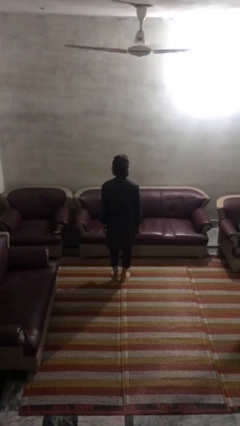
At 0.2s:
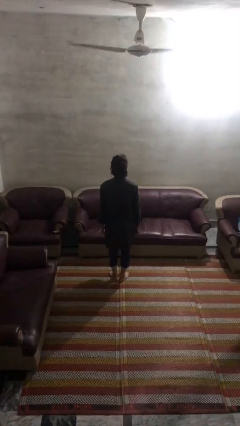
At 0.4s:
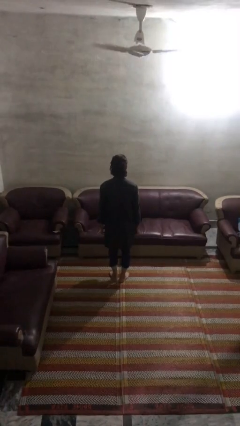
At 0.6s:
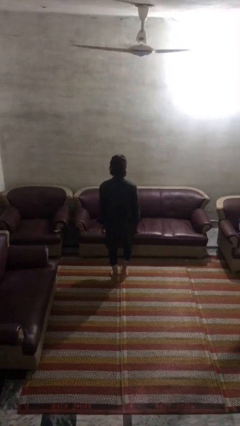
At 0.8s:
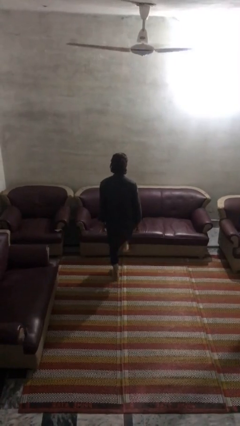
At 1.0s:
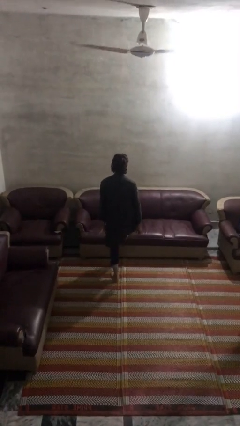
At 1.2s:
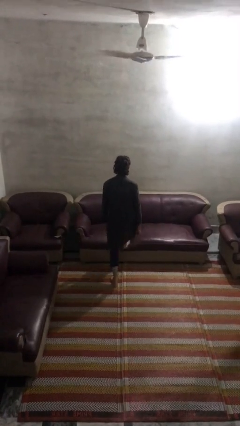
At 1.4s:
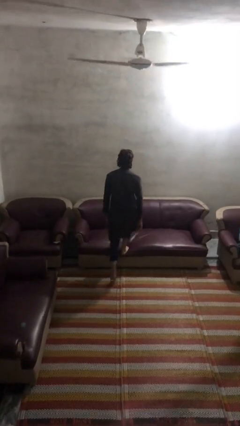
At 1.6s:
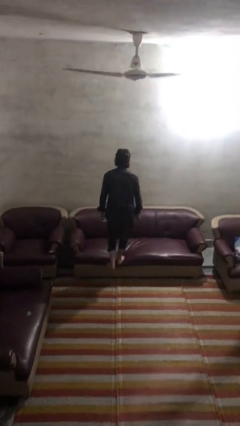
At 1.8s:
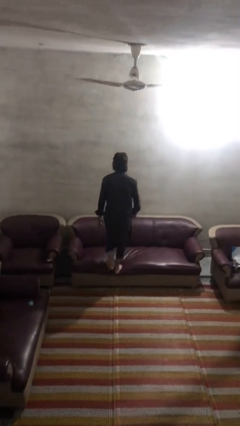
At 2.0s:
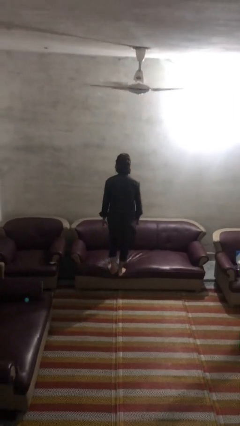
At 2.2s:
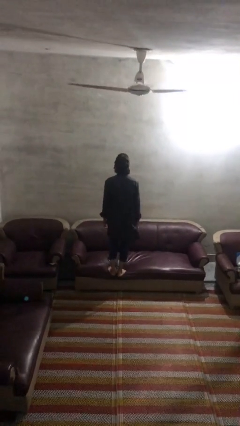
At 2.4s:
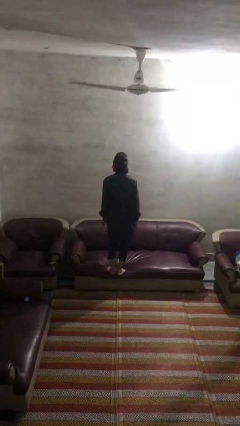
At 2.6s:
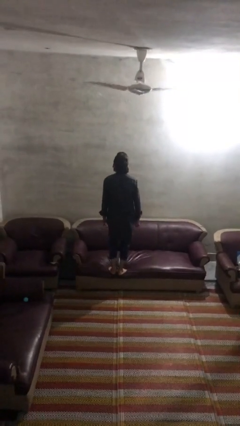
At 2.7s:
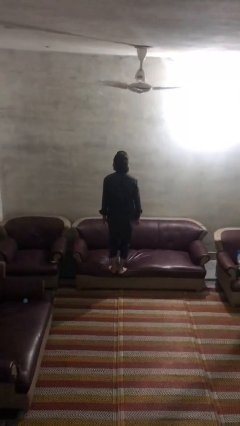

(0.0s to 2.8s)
person climbs on couch

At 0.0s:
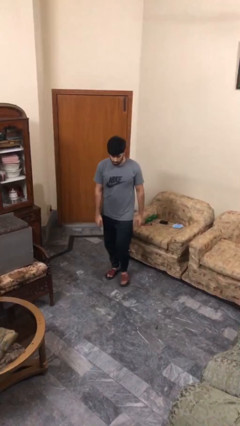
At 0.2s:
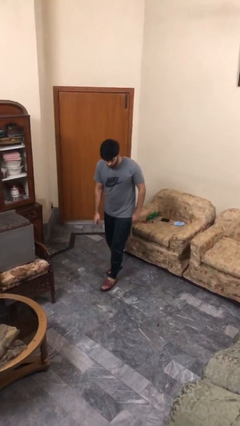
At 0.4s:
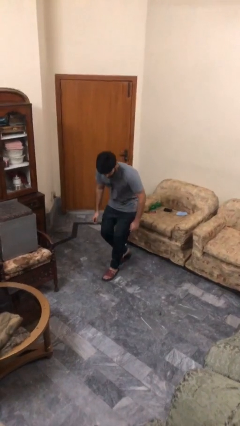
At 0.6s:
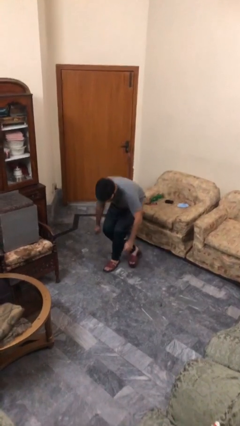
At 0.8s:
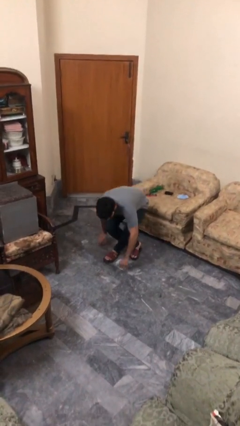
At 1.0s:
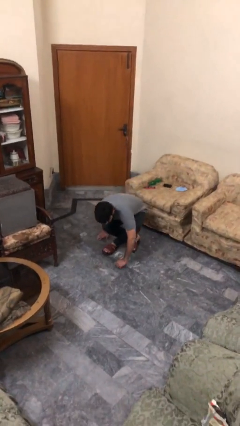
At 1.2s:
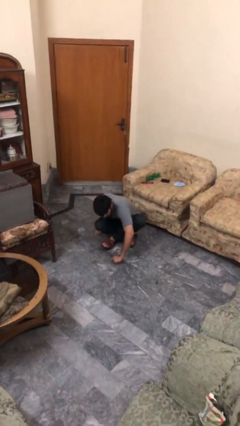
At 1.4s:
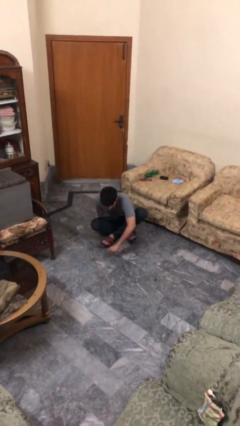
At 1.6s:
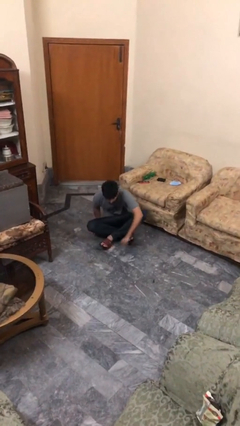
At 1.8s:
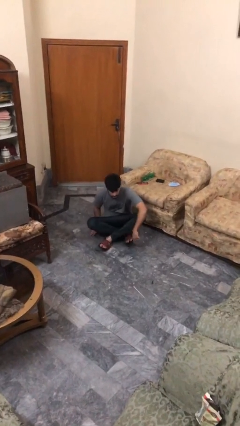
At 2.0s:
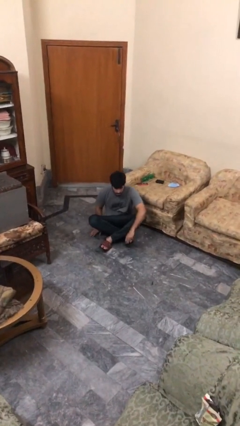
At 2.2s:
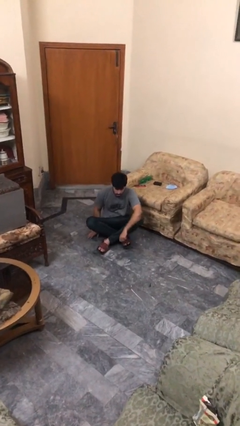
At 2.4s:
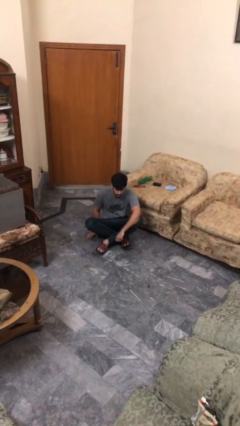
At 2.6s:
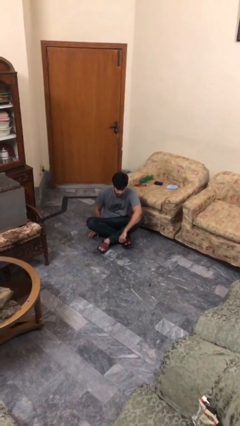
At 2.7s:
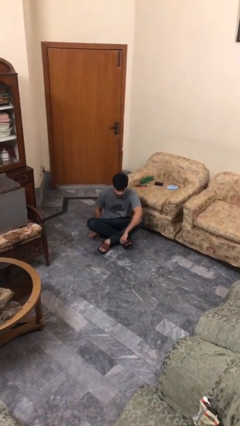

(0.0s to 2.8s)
person sits crisscross

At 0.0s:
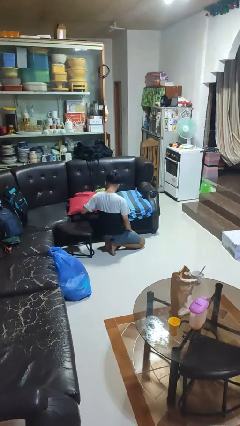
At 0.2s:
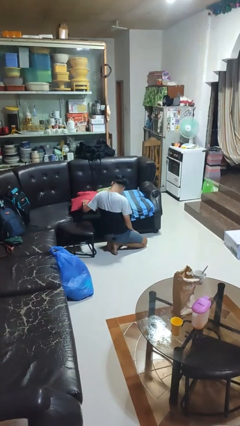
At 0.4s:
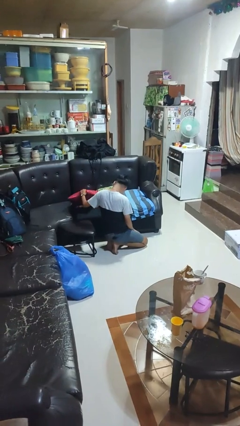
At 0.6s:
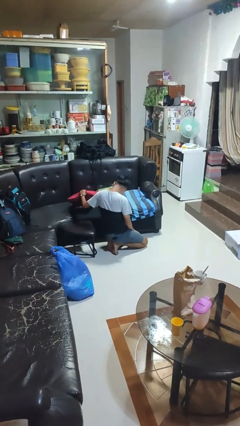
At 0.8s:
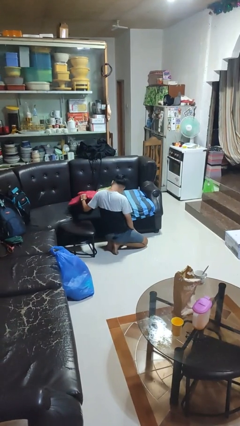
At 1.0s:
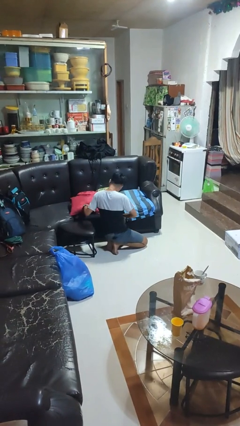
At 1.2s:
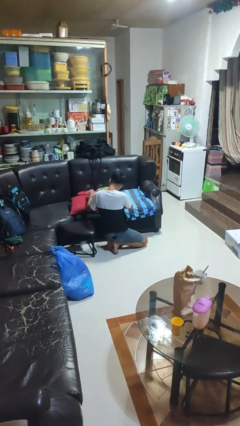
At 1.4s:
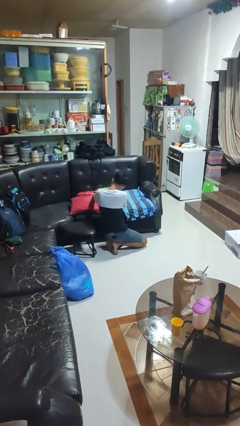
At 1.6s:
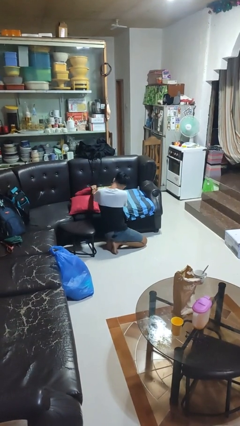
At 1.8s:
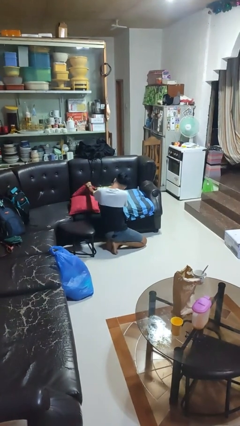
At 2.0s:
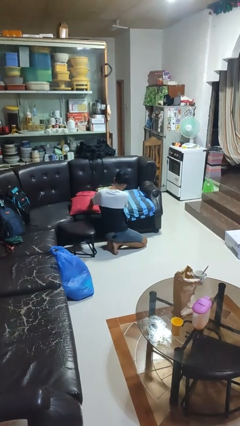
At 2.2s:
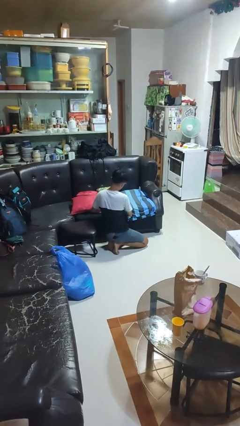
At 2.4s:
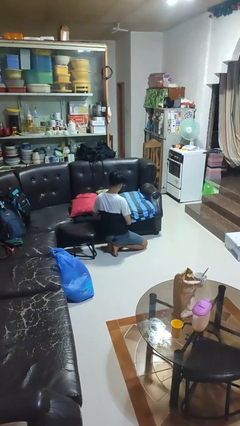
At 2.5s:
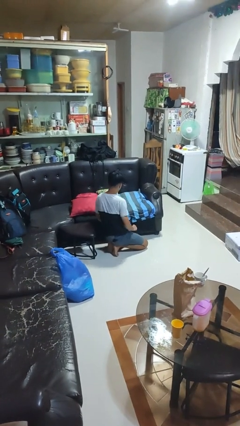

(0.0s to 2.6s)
person searches in couch

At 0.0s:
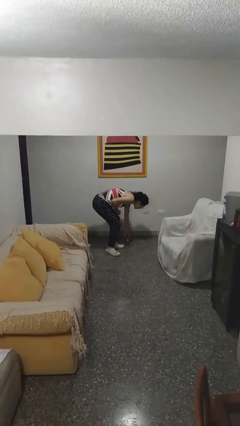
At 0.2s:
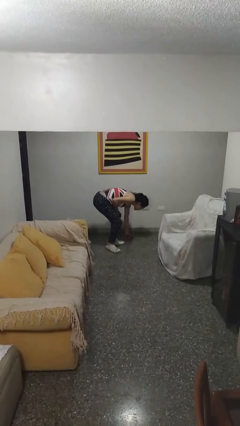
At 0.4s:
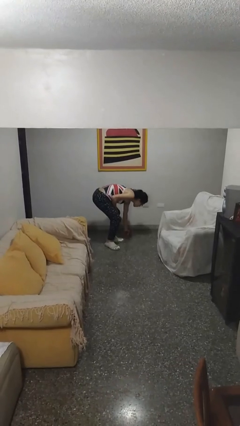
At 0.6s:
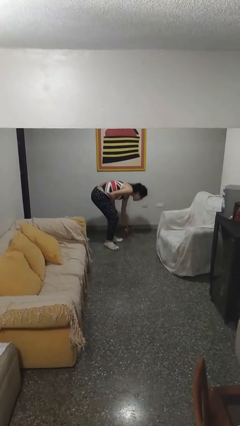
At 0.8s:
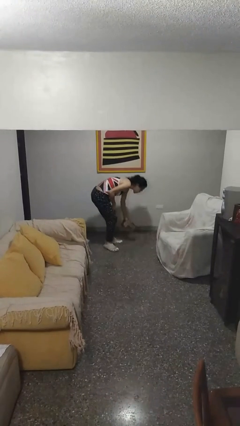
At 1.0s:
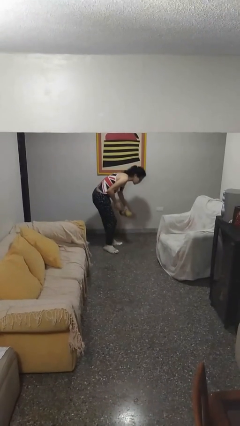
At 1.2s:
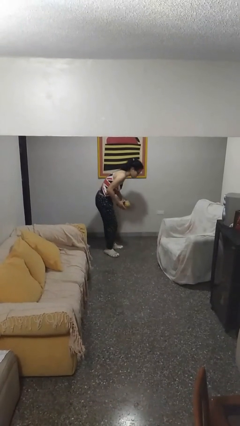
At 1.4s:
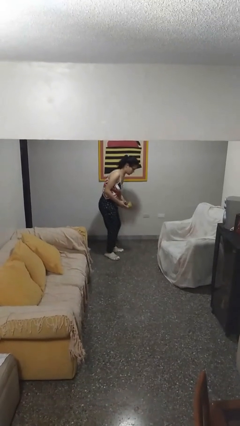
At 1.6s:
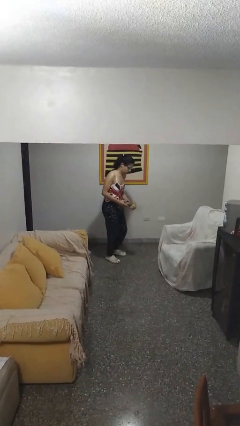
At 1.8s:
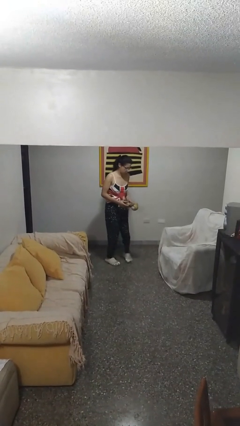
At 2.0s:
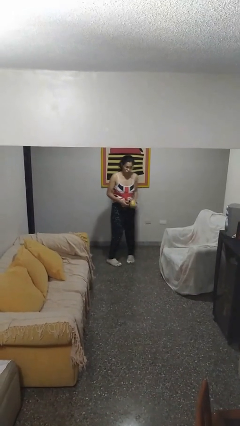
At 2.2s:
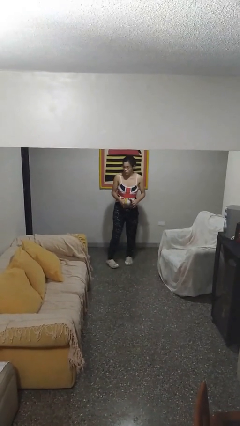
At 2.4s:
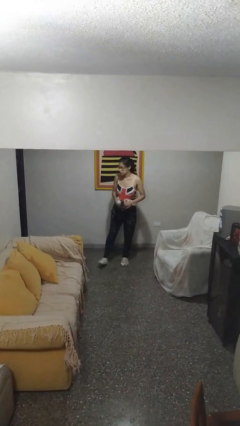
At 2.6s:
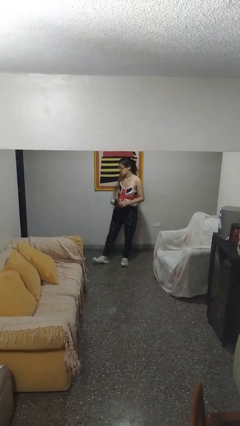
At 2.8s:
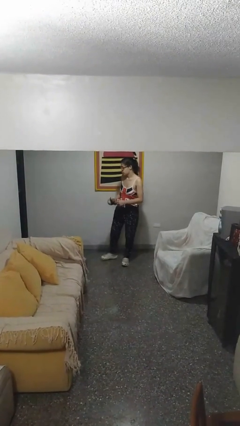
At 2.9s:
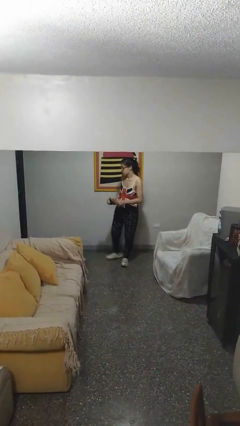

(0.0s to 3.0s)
person picks up object from floor

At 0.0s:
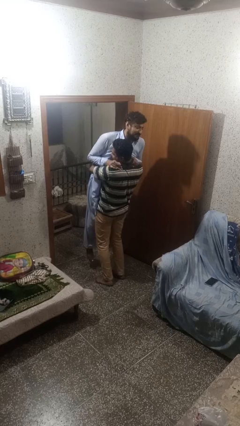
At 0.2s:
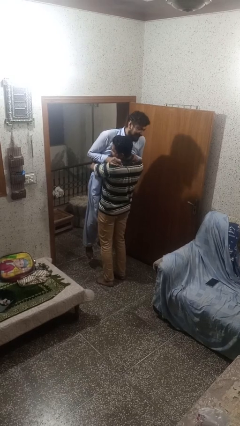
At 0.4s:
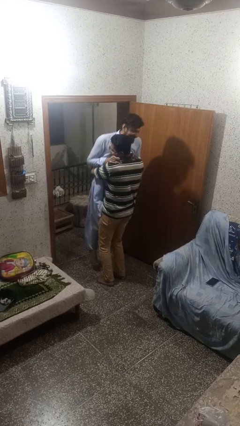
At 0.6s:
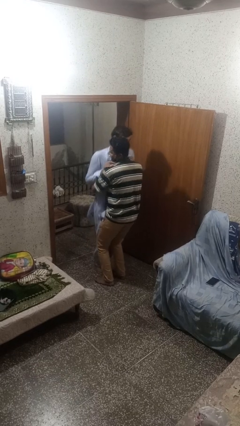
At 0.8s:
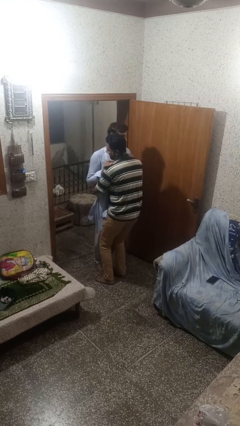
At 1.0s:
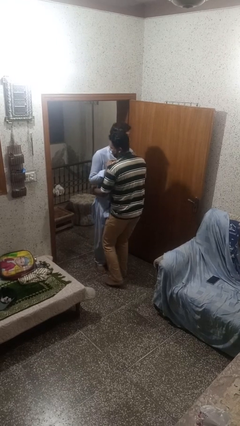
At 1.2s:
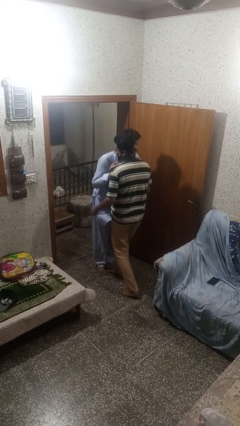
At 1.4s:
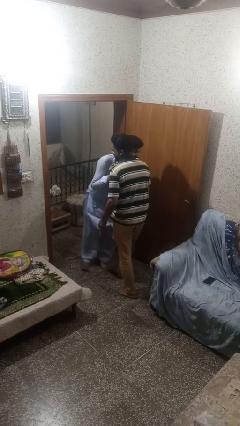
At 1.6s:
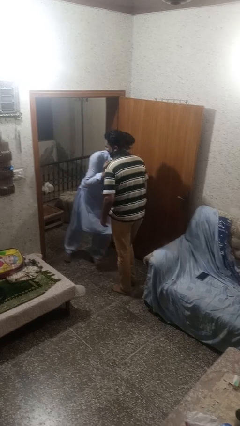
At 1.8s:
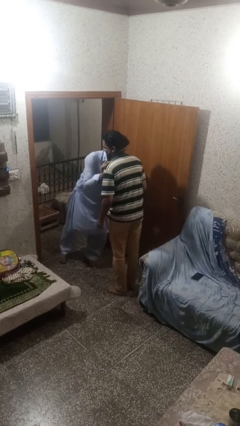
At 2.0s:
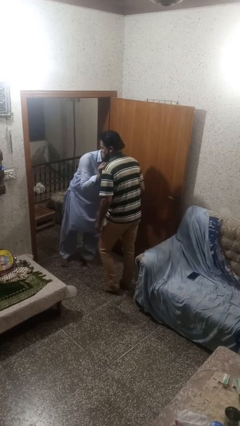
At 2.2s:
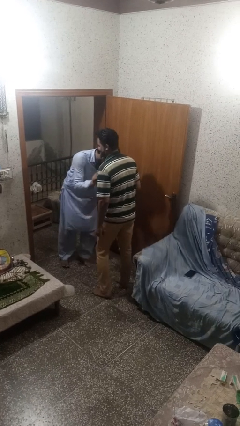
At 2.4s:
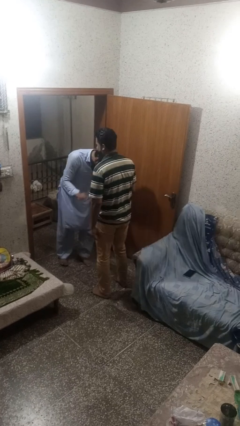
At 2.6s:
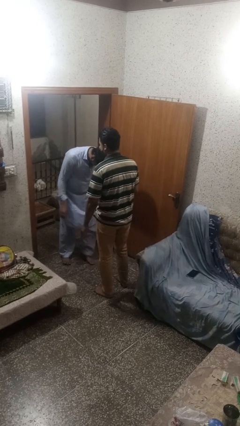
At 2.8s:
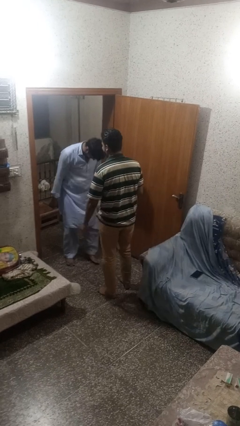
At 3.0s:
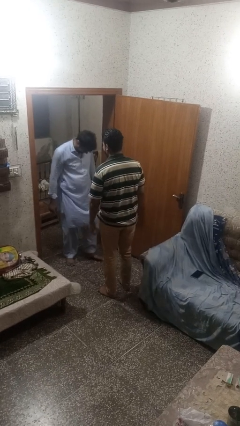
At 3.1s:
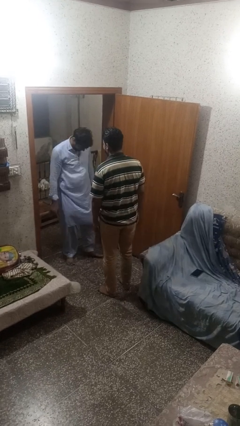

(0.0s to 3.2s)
person puts down person

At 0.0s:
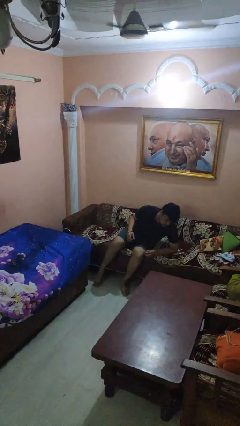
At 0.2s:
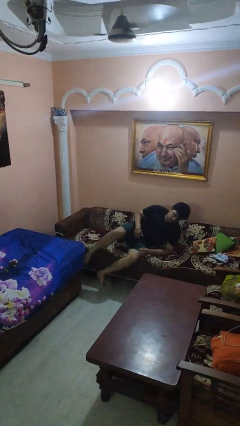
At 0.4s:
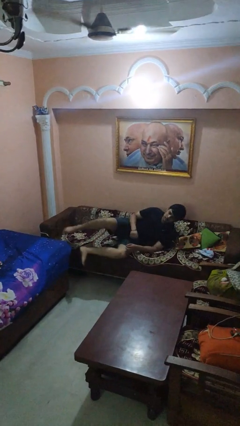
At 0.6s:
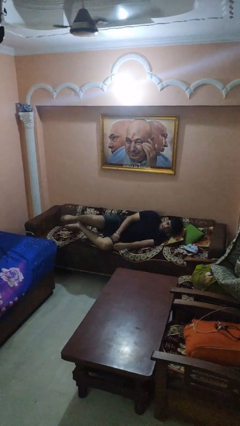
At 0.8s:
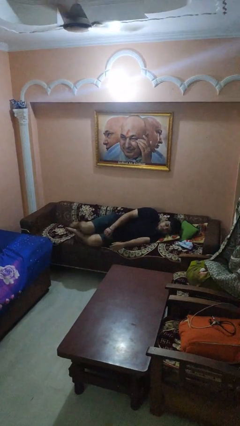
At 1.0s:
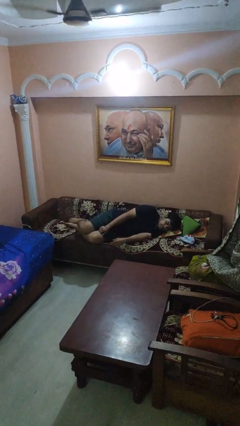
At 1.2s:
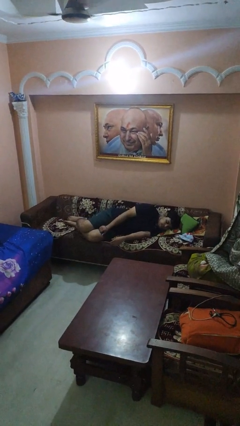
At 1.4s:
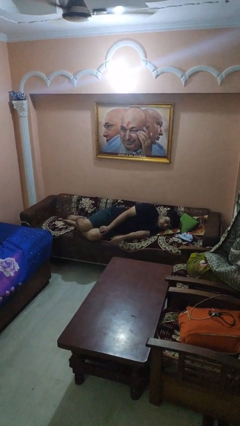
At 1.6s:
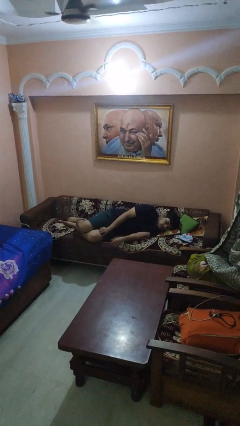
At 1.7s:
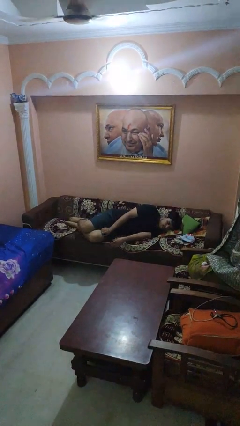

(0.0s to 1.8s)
person lies down on couch

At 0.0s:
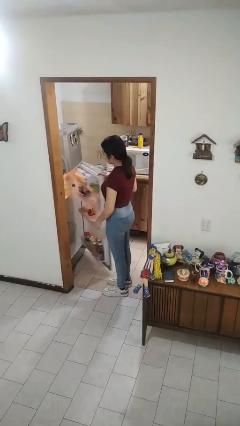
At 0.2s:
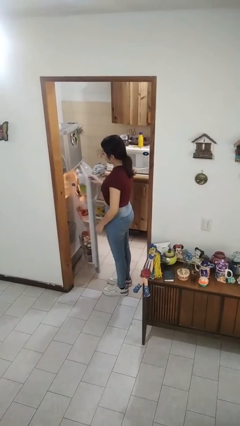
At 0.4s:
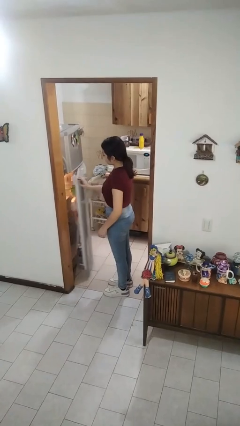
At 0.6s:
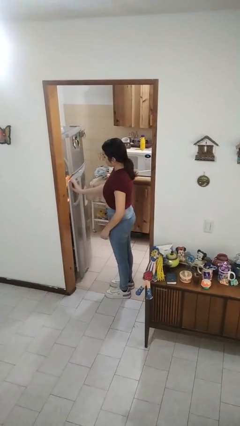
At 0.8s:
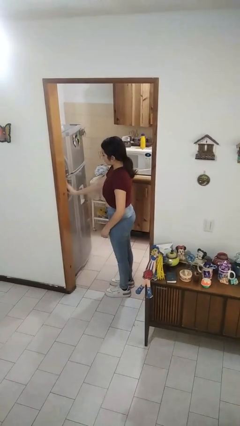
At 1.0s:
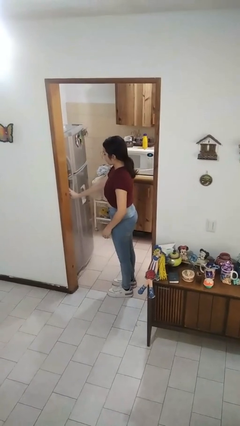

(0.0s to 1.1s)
person closes refrigerator
